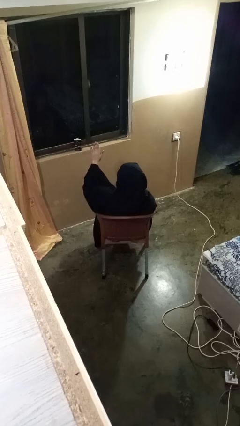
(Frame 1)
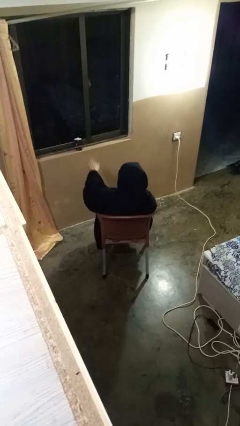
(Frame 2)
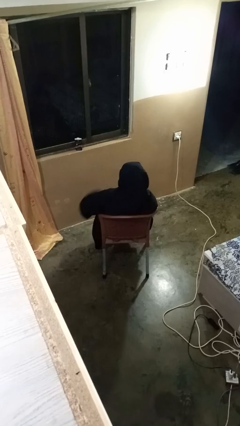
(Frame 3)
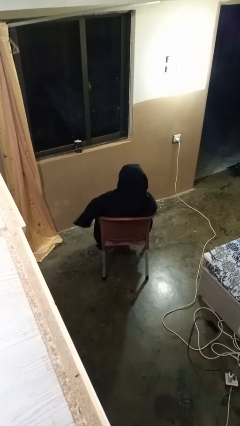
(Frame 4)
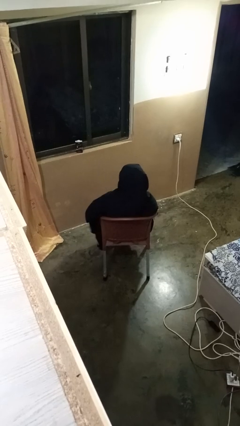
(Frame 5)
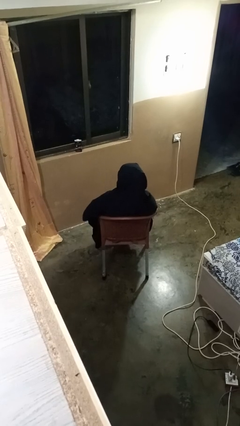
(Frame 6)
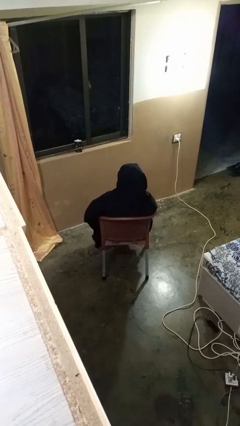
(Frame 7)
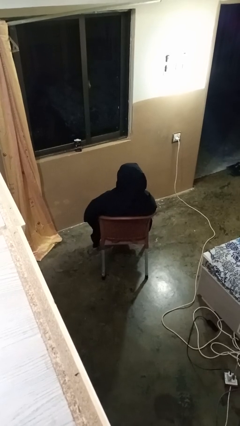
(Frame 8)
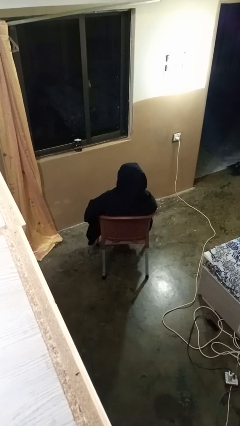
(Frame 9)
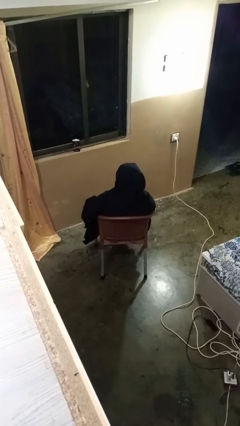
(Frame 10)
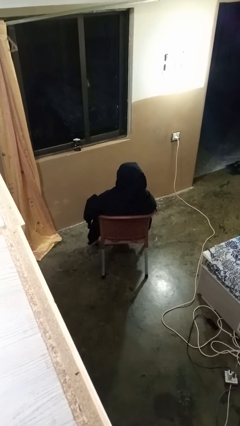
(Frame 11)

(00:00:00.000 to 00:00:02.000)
person gestures swipe down

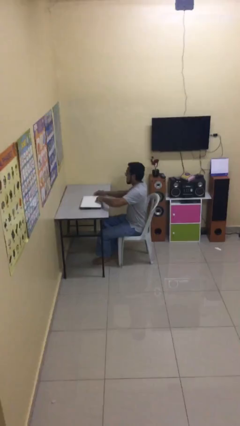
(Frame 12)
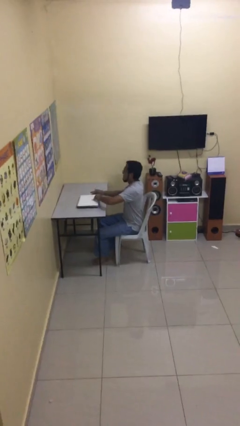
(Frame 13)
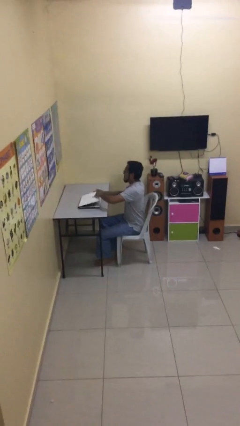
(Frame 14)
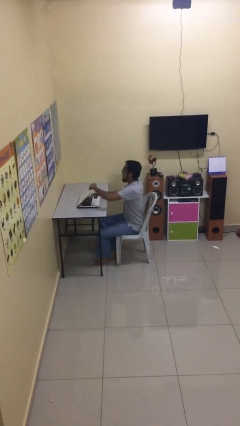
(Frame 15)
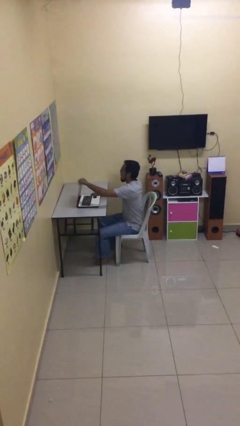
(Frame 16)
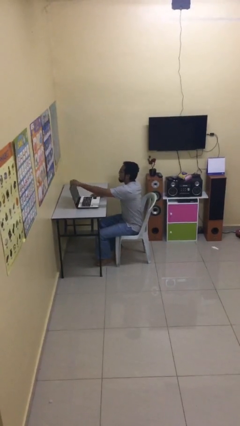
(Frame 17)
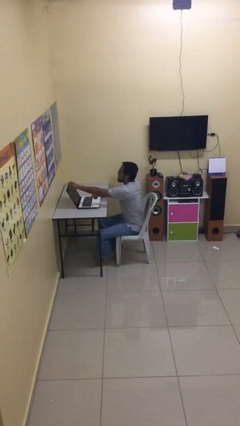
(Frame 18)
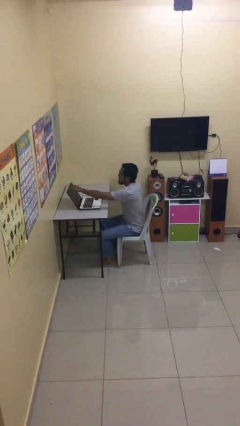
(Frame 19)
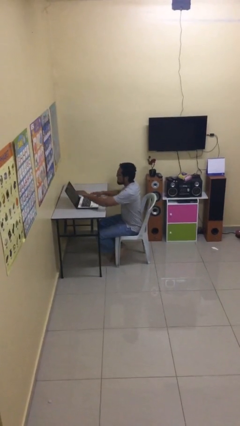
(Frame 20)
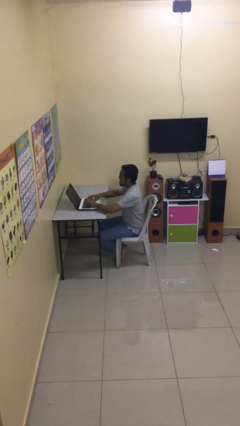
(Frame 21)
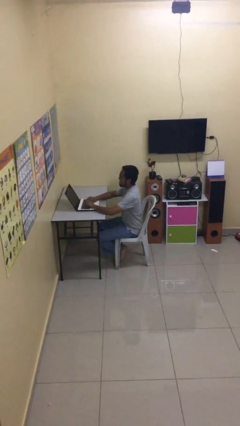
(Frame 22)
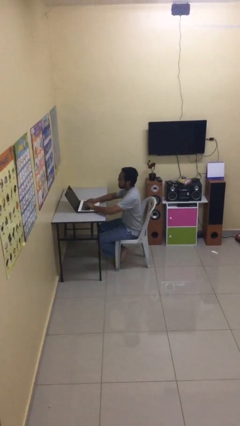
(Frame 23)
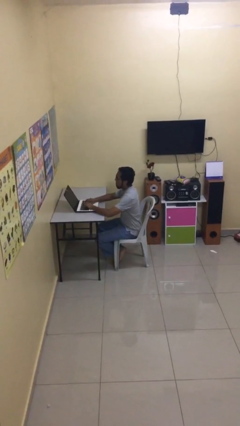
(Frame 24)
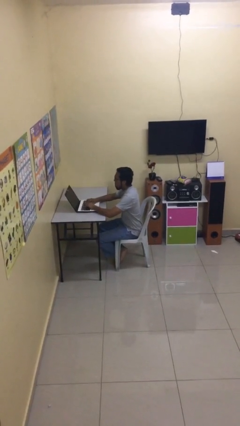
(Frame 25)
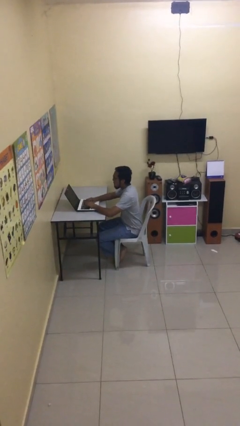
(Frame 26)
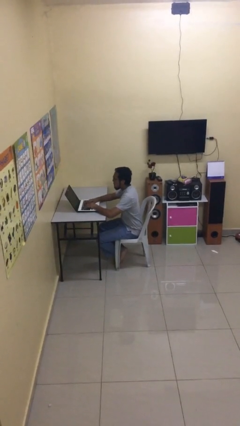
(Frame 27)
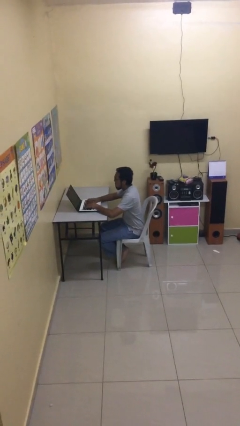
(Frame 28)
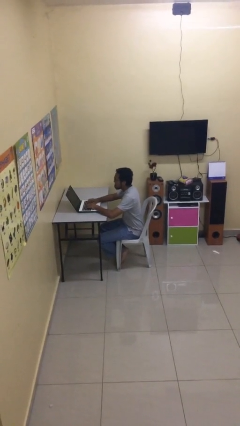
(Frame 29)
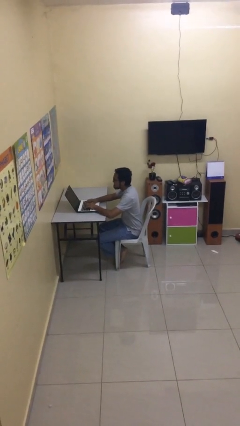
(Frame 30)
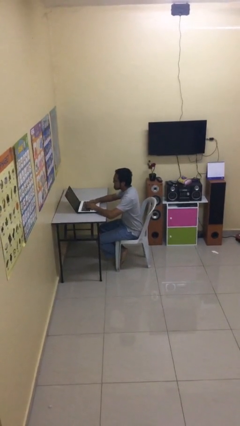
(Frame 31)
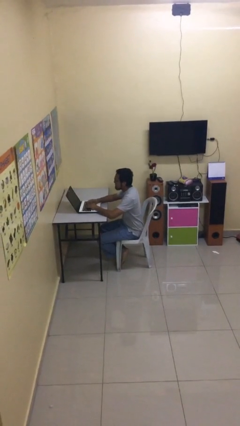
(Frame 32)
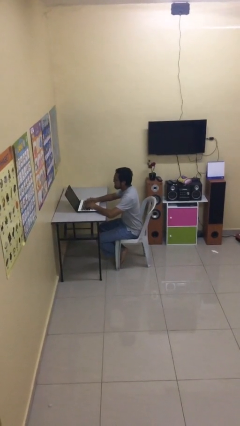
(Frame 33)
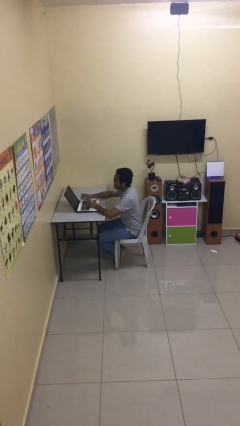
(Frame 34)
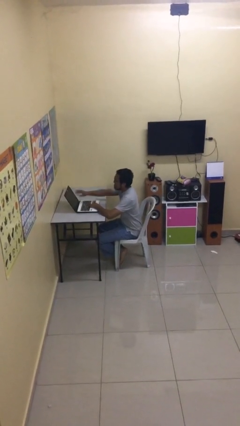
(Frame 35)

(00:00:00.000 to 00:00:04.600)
person interacts with laptop

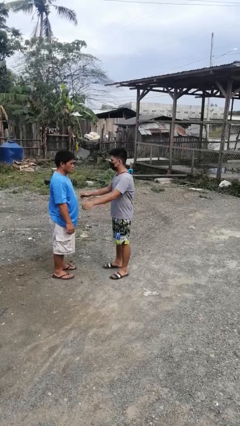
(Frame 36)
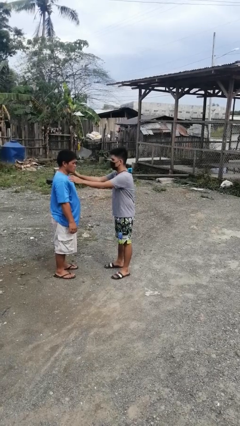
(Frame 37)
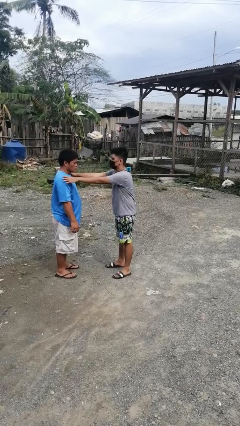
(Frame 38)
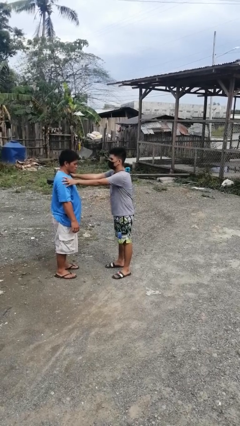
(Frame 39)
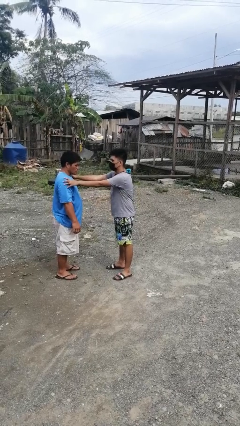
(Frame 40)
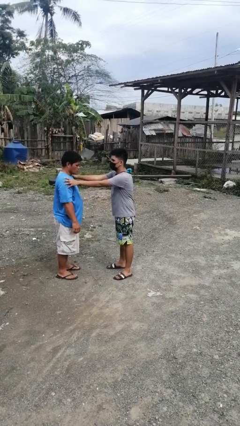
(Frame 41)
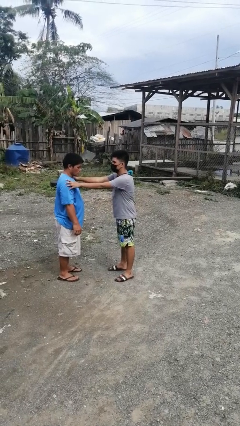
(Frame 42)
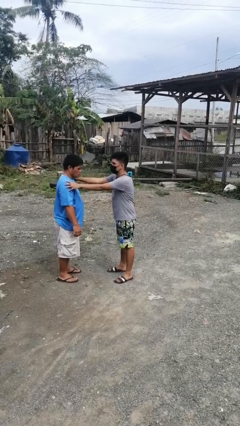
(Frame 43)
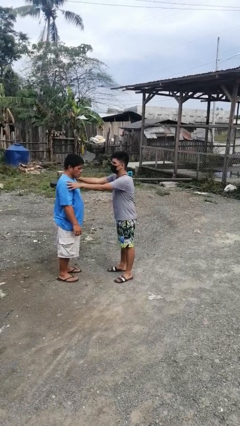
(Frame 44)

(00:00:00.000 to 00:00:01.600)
person grabs person by shoulder

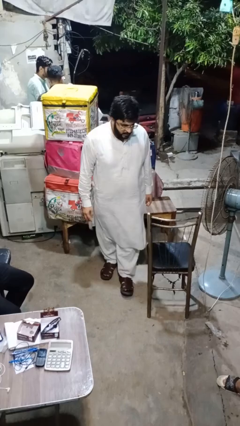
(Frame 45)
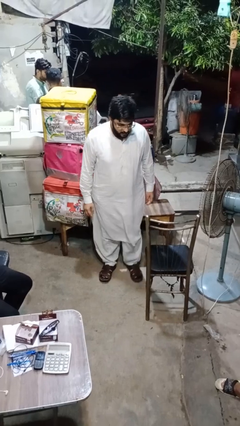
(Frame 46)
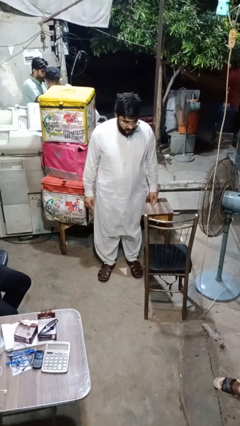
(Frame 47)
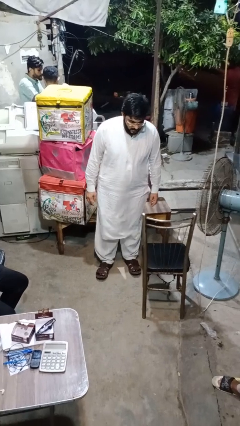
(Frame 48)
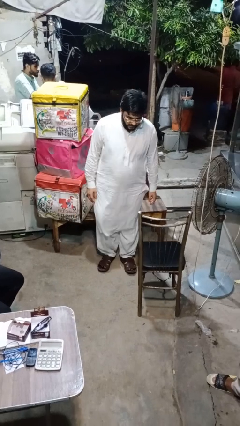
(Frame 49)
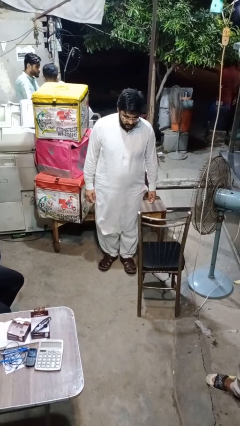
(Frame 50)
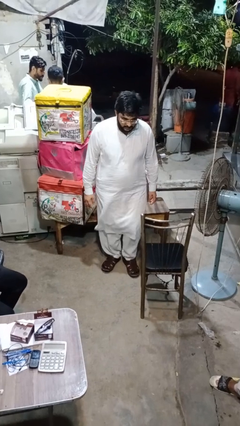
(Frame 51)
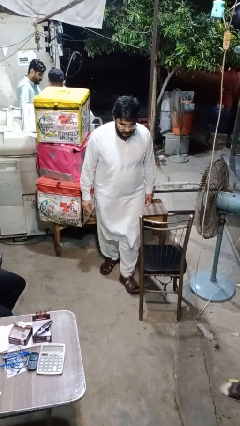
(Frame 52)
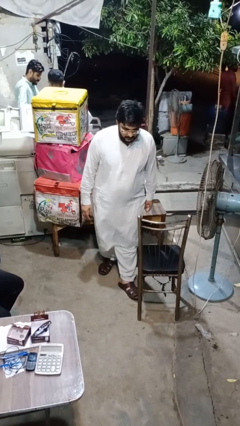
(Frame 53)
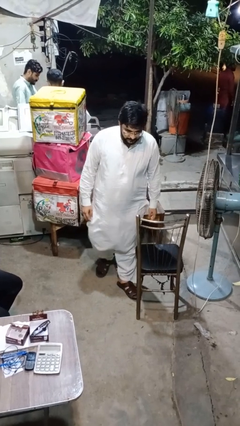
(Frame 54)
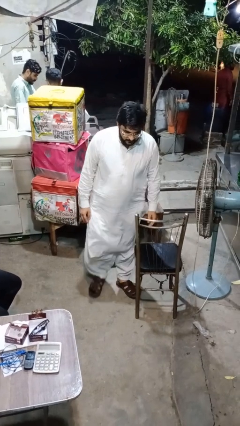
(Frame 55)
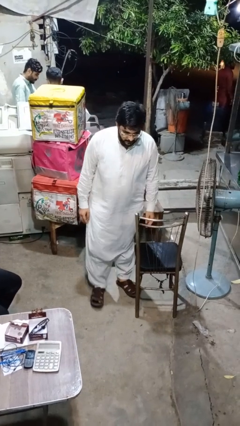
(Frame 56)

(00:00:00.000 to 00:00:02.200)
person trips on object on floor

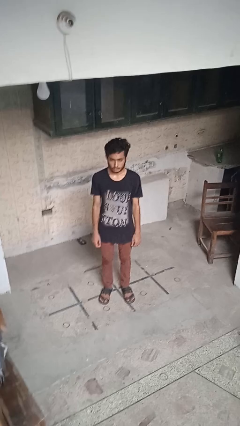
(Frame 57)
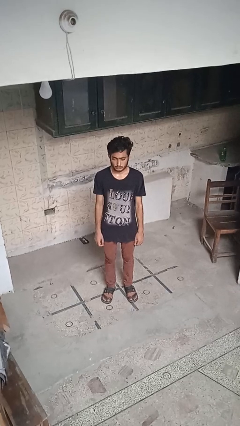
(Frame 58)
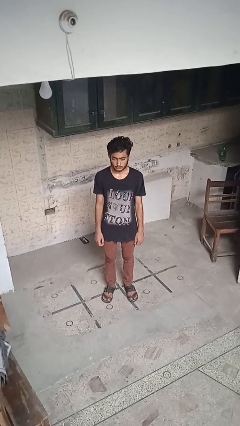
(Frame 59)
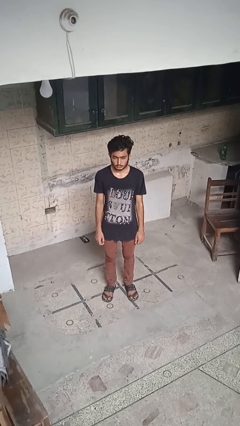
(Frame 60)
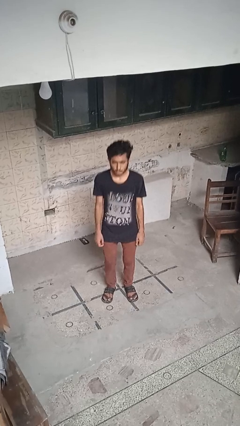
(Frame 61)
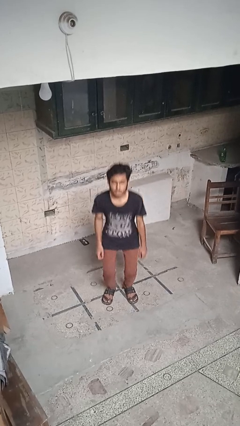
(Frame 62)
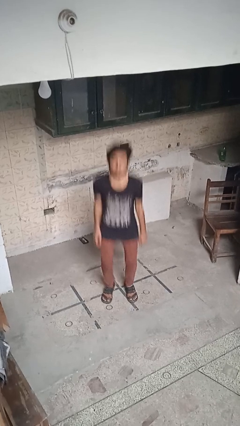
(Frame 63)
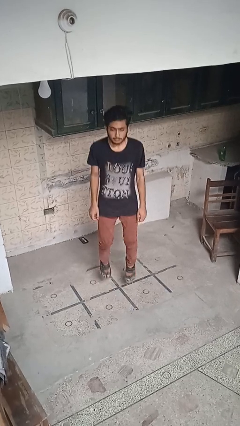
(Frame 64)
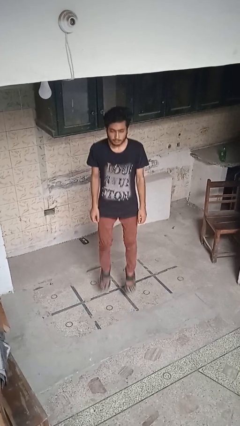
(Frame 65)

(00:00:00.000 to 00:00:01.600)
person jumps

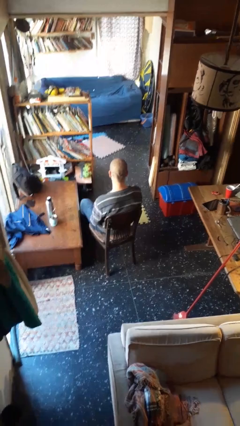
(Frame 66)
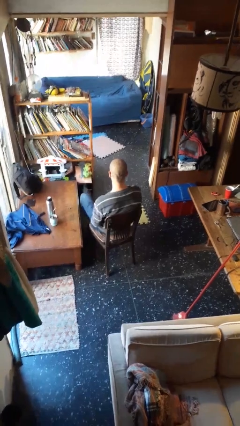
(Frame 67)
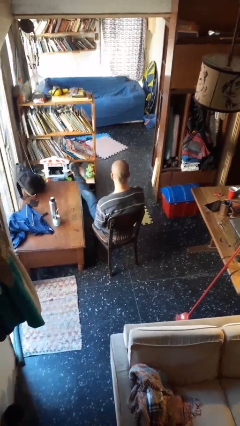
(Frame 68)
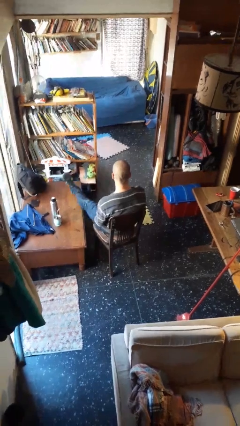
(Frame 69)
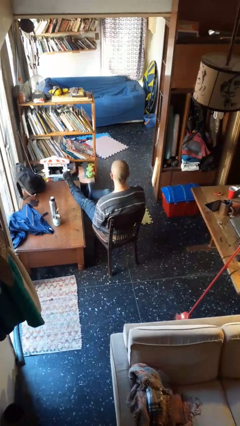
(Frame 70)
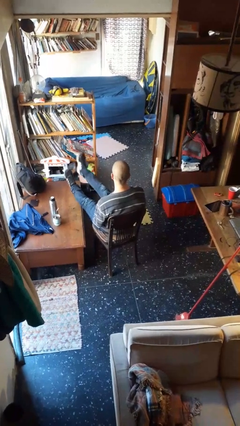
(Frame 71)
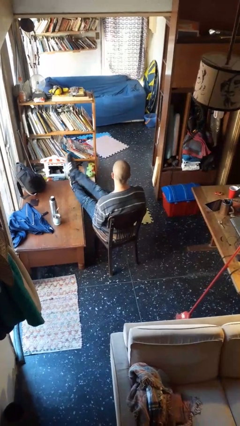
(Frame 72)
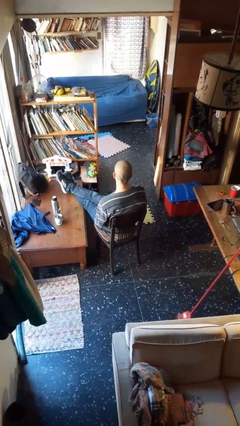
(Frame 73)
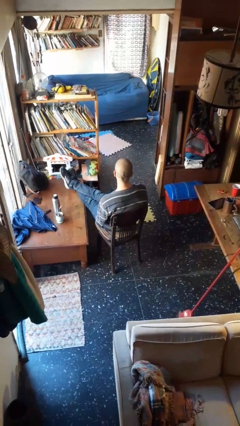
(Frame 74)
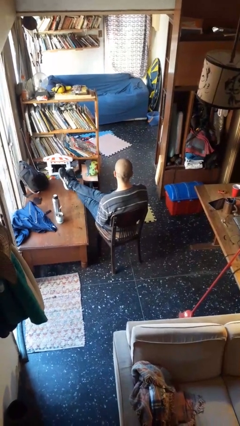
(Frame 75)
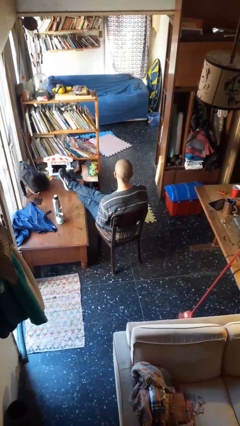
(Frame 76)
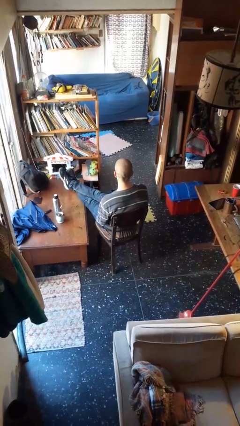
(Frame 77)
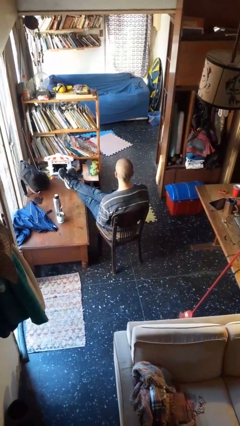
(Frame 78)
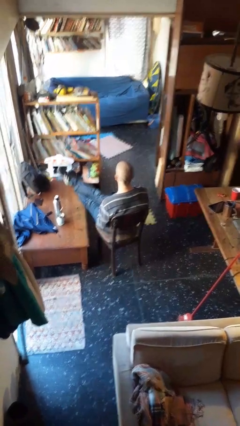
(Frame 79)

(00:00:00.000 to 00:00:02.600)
person puts feet up

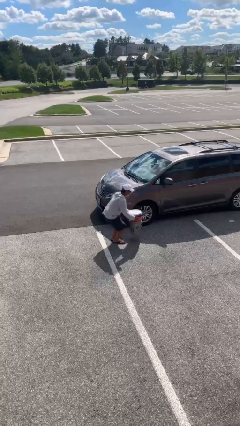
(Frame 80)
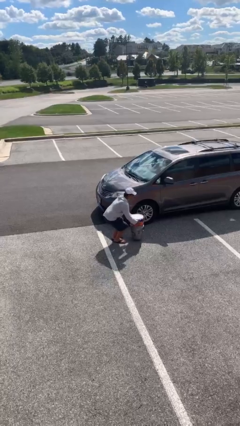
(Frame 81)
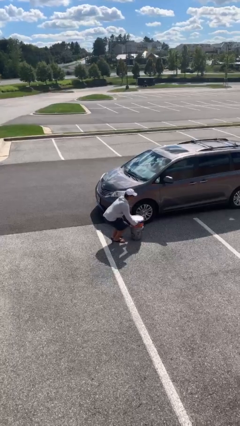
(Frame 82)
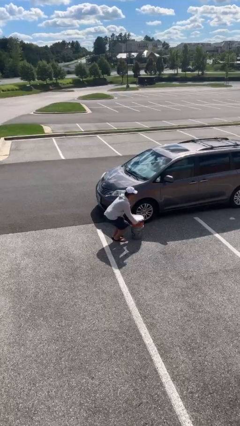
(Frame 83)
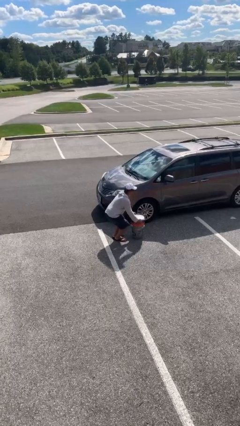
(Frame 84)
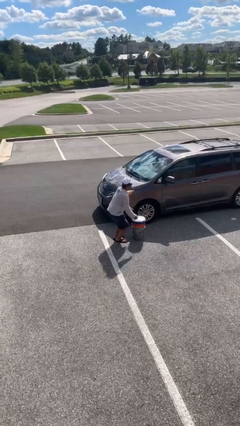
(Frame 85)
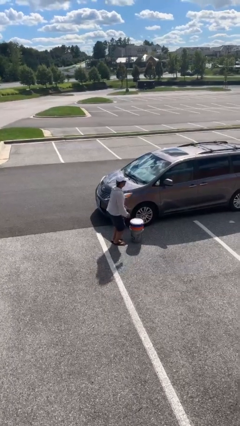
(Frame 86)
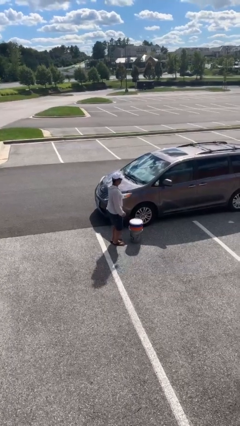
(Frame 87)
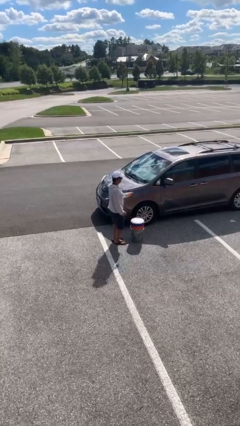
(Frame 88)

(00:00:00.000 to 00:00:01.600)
person puts down object on floor

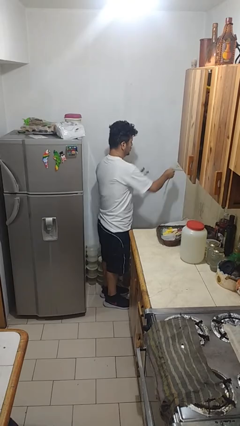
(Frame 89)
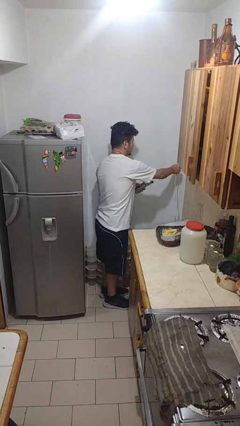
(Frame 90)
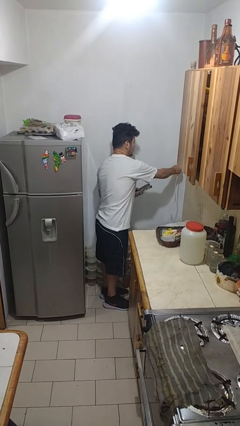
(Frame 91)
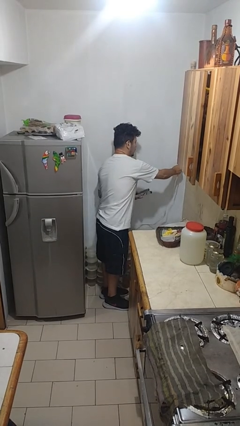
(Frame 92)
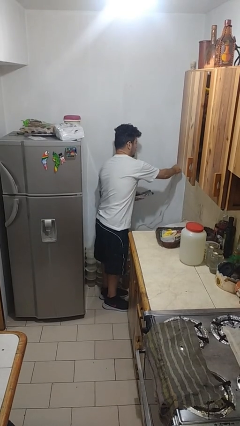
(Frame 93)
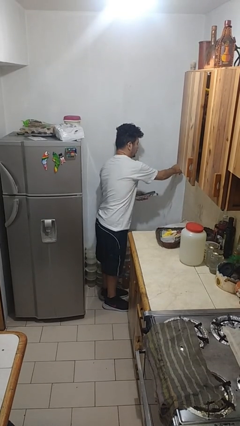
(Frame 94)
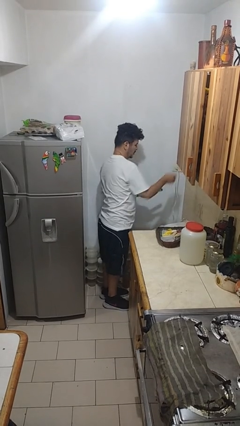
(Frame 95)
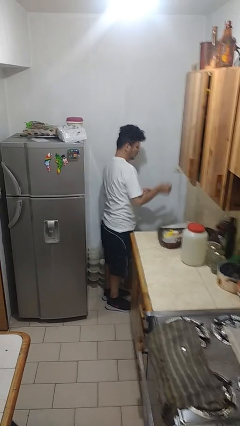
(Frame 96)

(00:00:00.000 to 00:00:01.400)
person plugs into electrical socket
